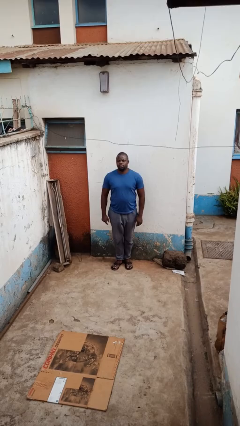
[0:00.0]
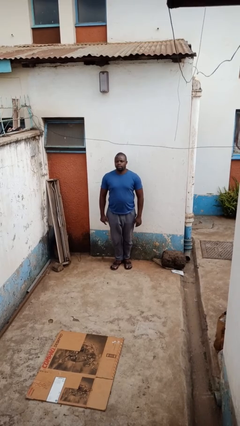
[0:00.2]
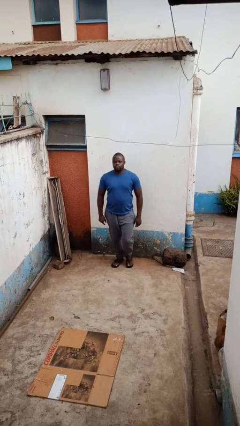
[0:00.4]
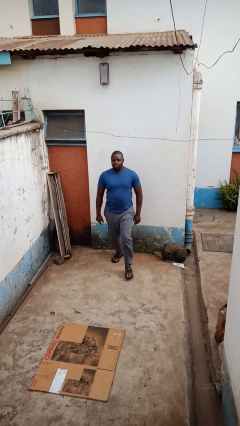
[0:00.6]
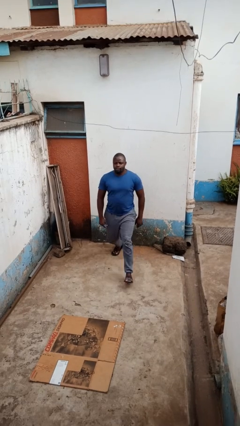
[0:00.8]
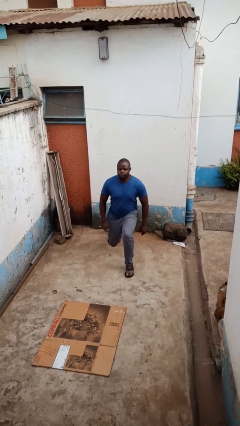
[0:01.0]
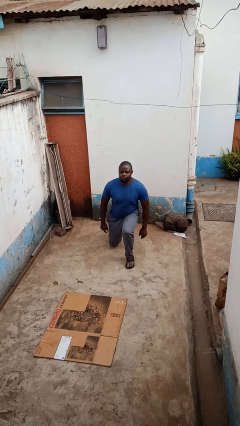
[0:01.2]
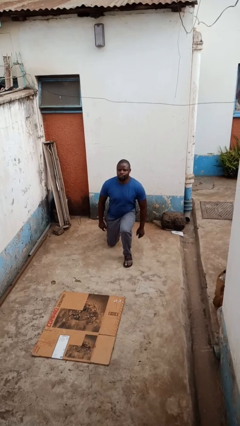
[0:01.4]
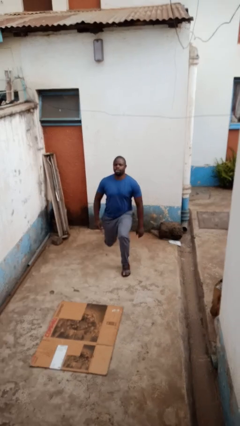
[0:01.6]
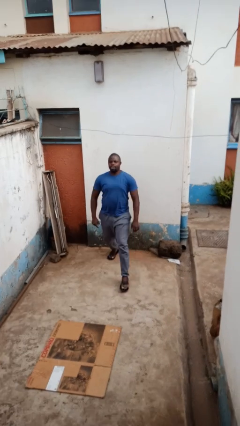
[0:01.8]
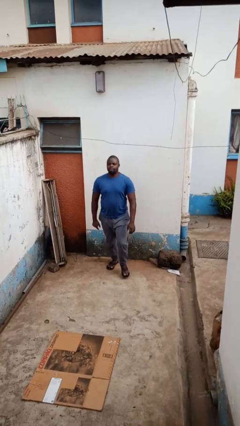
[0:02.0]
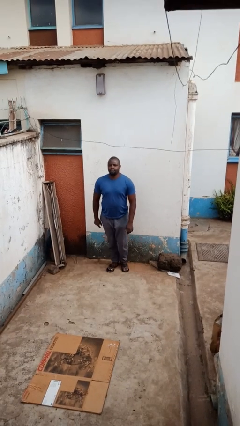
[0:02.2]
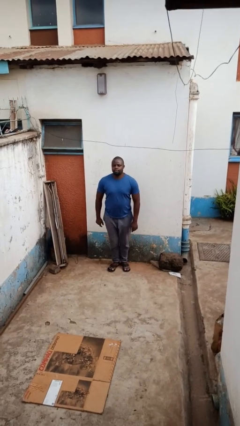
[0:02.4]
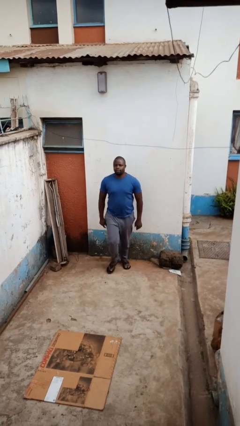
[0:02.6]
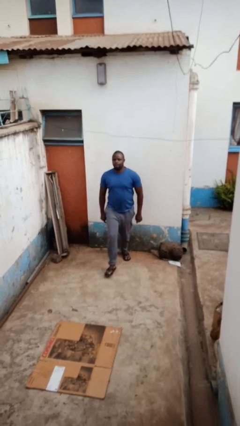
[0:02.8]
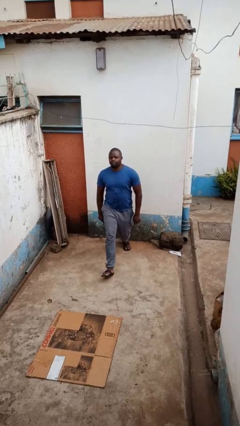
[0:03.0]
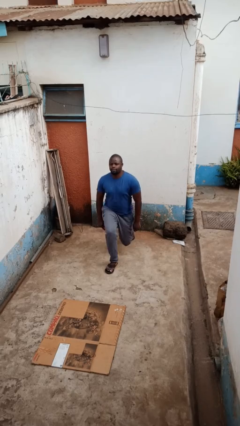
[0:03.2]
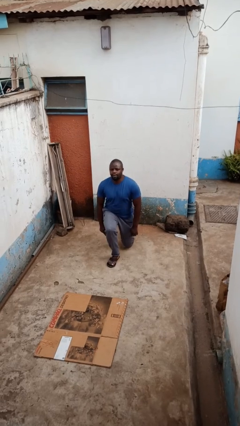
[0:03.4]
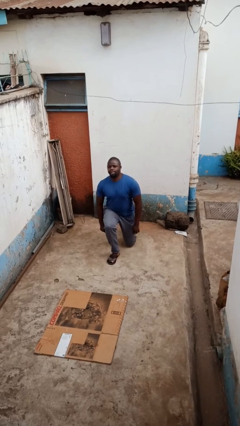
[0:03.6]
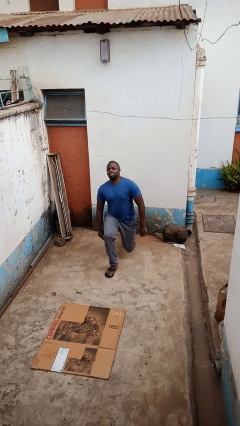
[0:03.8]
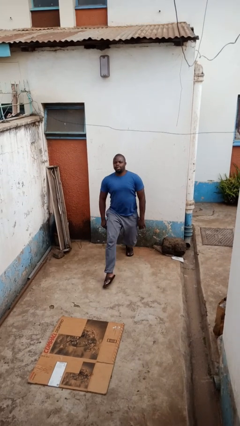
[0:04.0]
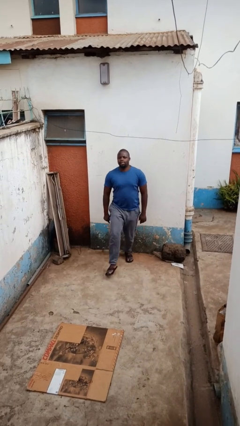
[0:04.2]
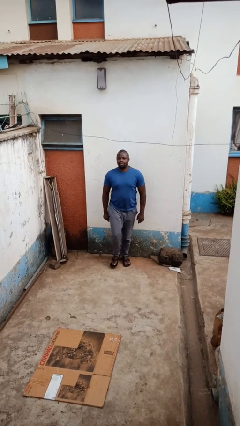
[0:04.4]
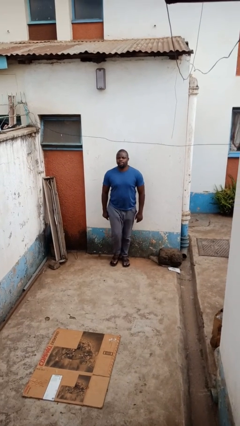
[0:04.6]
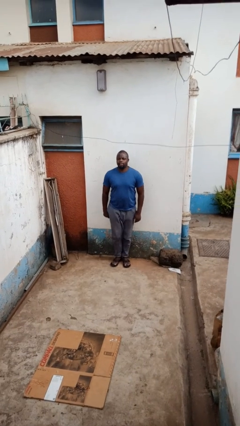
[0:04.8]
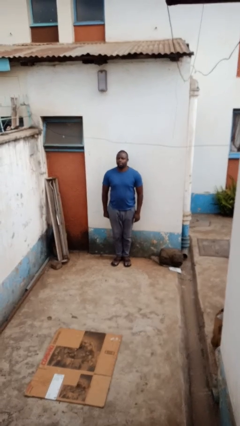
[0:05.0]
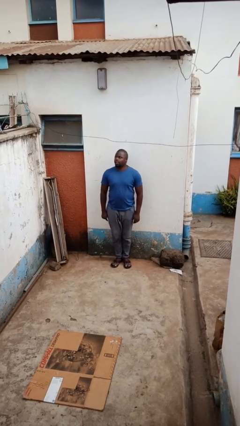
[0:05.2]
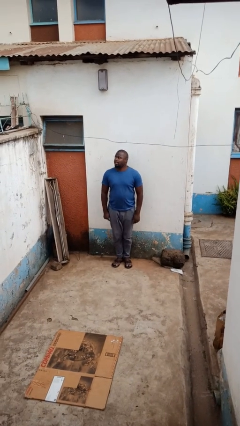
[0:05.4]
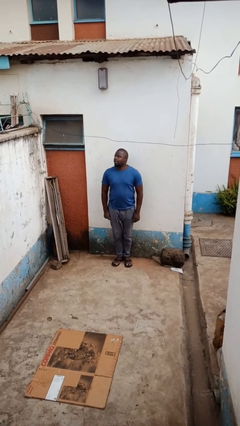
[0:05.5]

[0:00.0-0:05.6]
person exercises with lunges

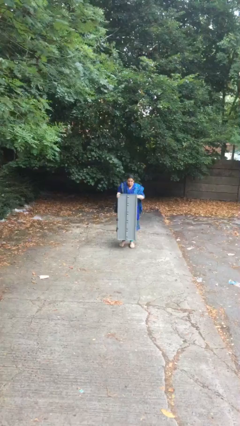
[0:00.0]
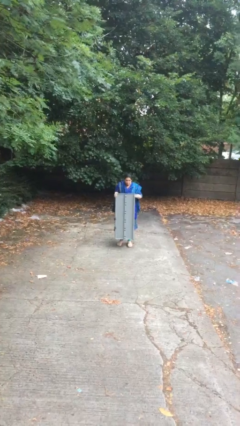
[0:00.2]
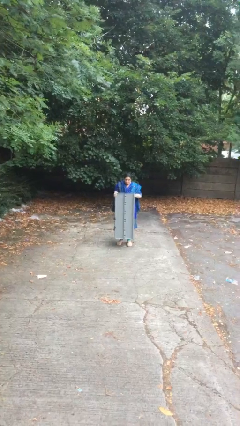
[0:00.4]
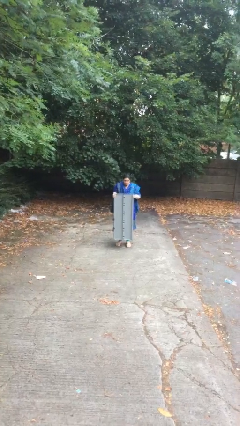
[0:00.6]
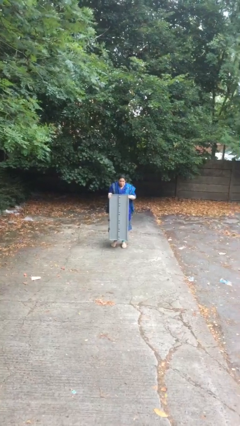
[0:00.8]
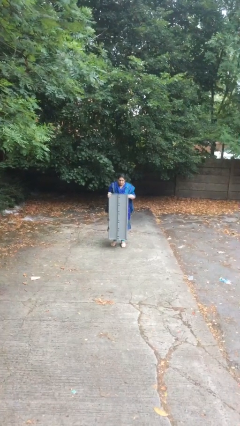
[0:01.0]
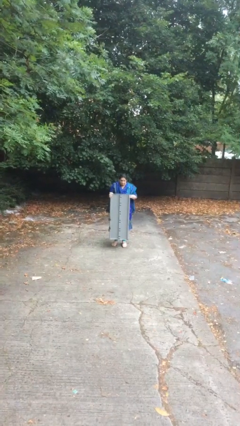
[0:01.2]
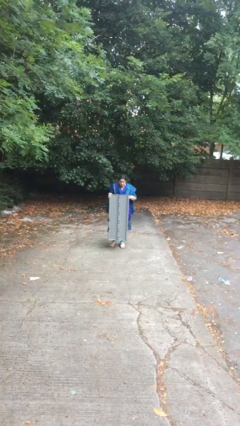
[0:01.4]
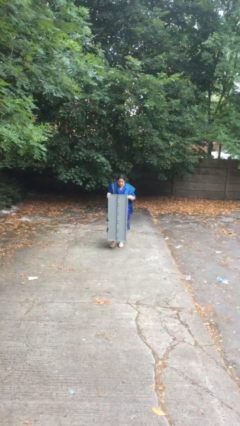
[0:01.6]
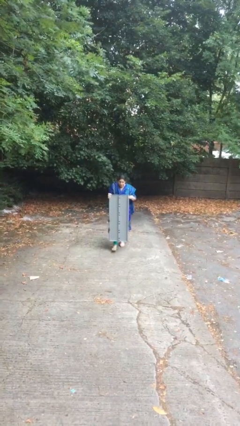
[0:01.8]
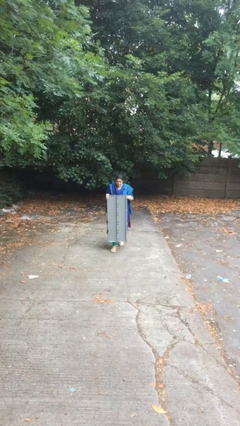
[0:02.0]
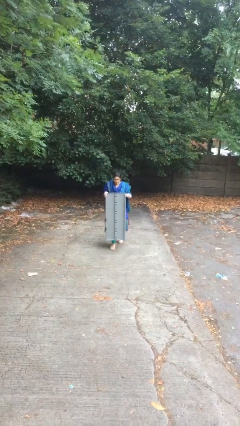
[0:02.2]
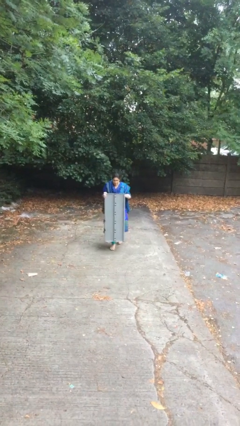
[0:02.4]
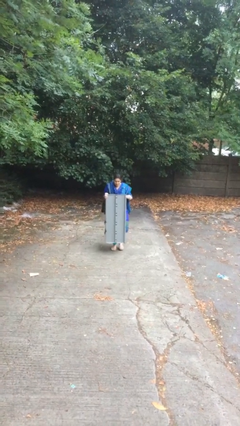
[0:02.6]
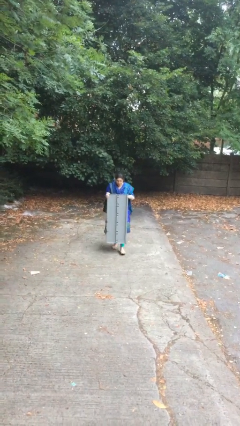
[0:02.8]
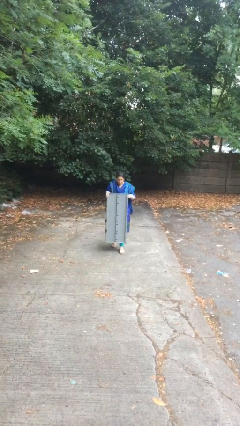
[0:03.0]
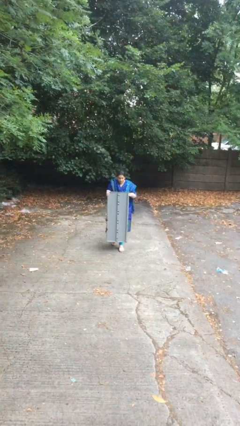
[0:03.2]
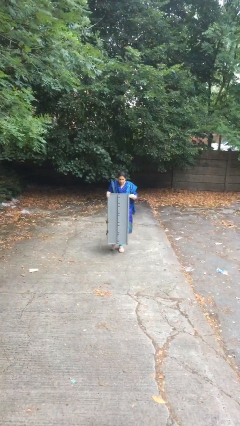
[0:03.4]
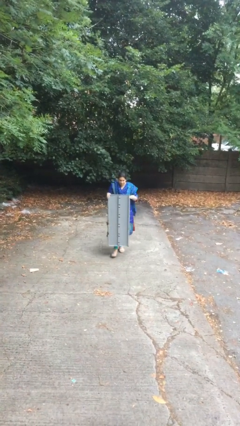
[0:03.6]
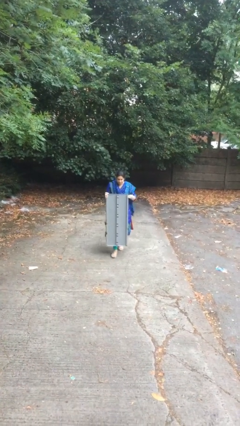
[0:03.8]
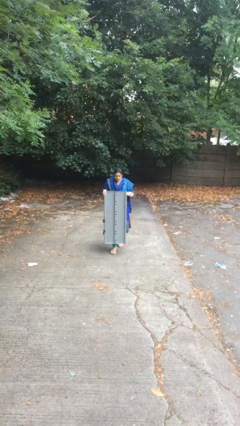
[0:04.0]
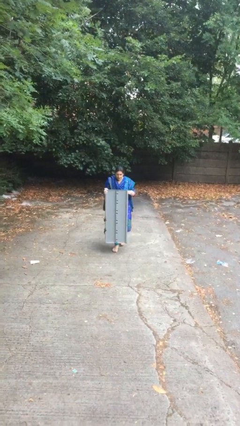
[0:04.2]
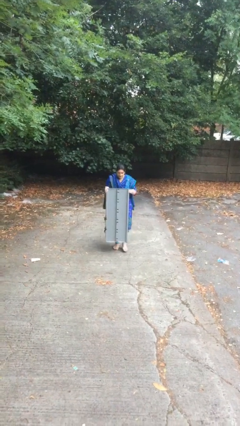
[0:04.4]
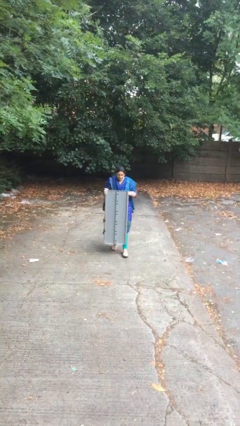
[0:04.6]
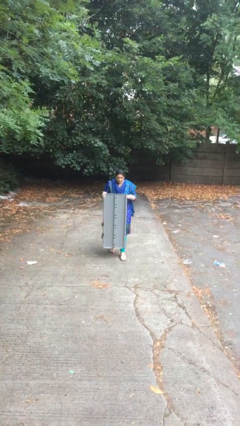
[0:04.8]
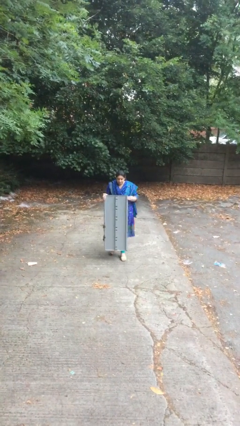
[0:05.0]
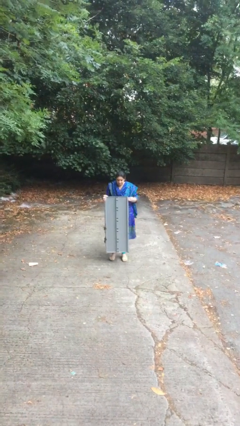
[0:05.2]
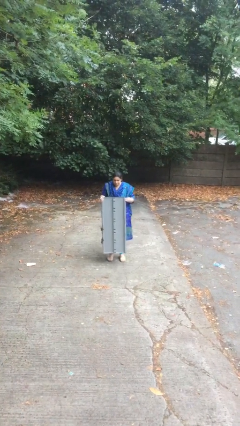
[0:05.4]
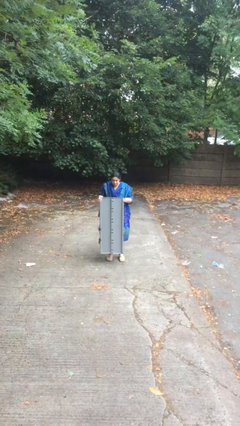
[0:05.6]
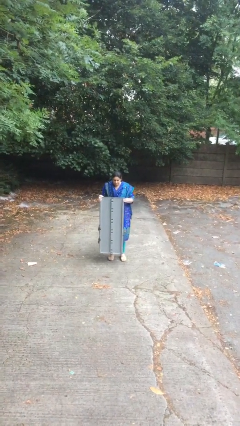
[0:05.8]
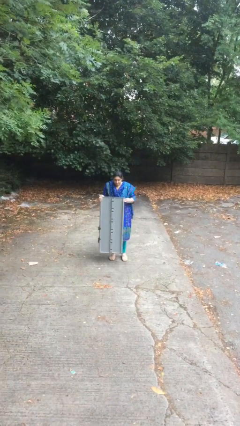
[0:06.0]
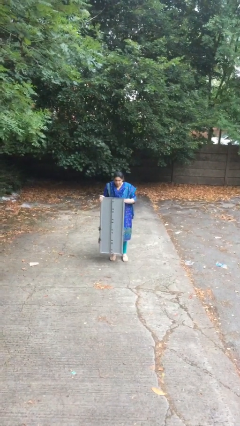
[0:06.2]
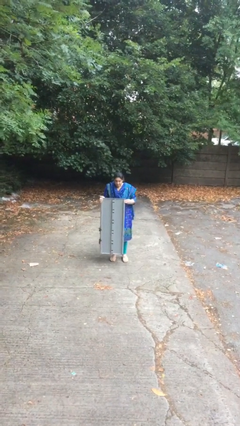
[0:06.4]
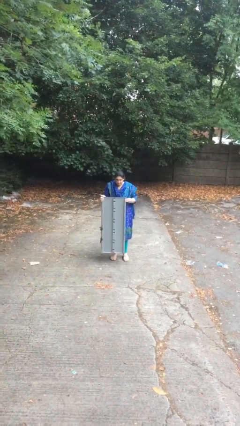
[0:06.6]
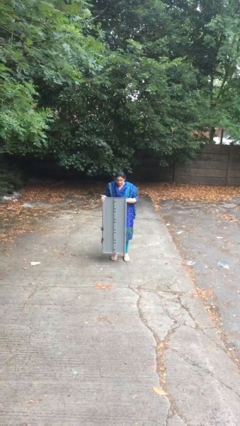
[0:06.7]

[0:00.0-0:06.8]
person carries heavy object

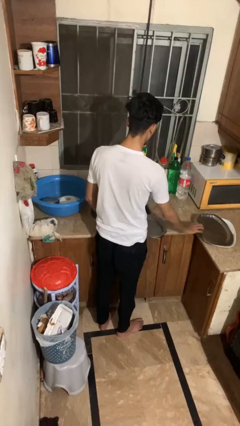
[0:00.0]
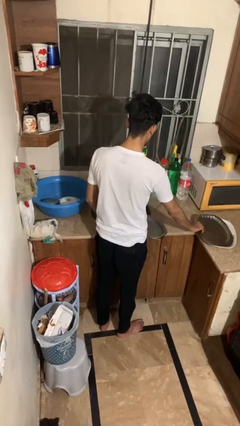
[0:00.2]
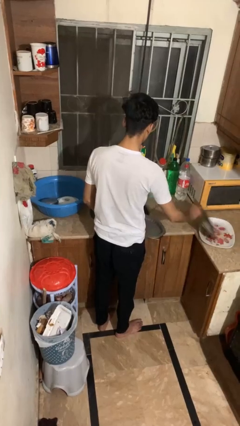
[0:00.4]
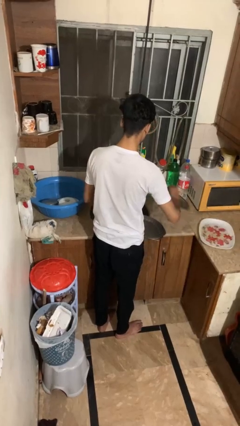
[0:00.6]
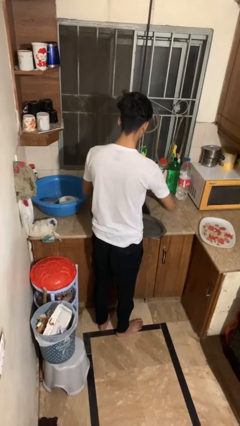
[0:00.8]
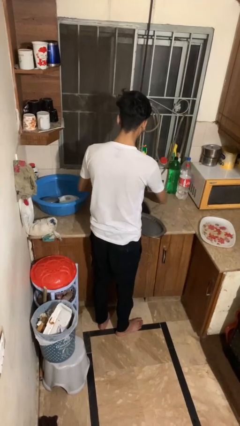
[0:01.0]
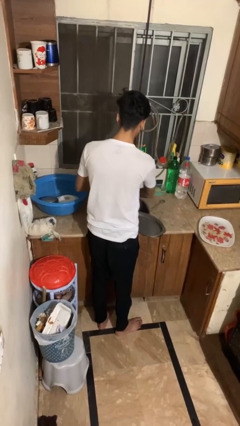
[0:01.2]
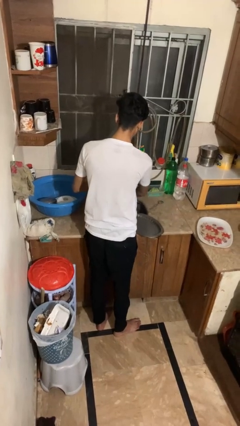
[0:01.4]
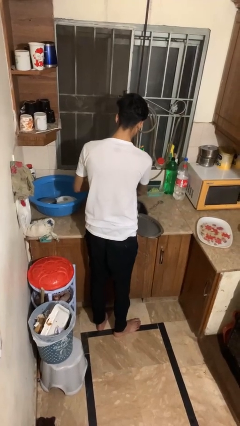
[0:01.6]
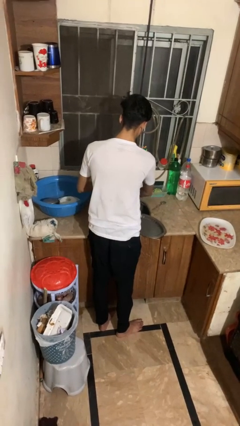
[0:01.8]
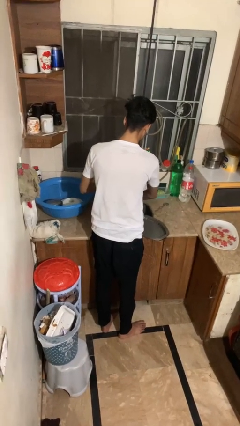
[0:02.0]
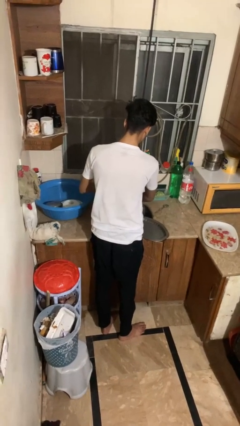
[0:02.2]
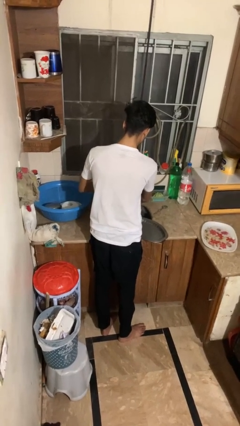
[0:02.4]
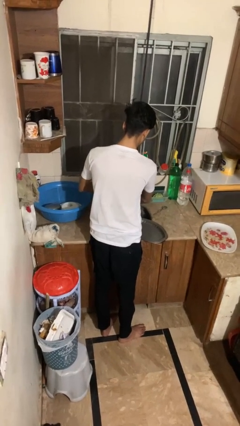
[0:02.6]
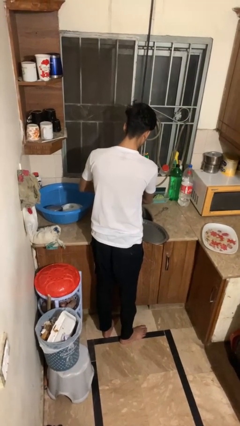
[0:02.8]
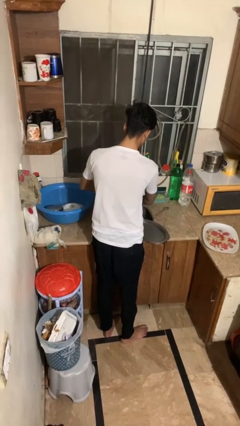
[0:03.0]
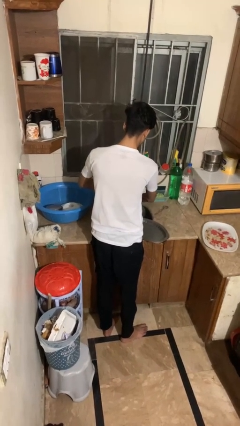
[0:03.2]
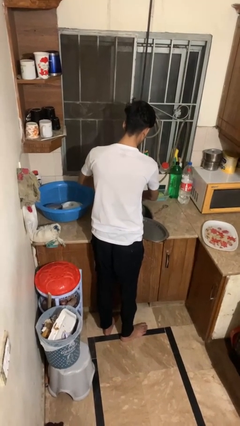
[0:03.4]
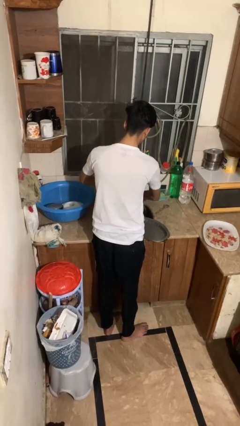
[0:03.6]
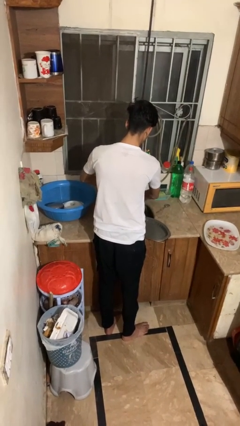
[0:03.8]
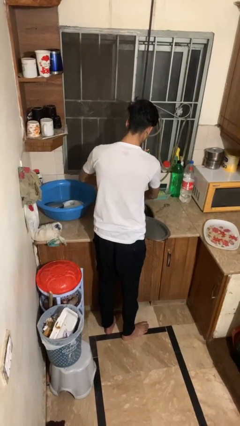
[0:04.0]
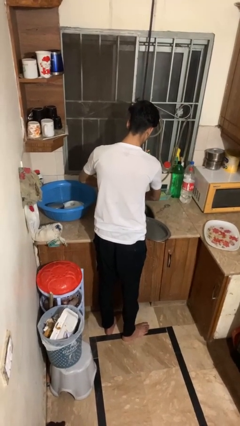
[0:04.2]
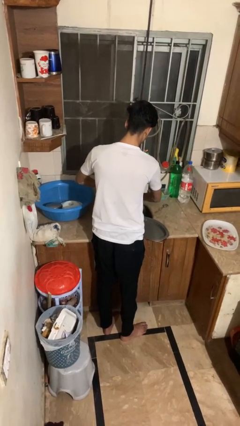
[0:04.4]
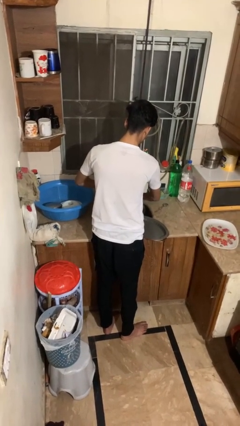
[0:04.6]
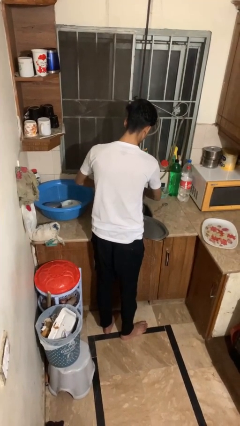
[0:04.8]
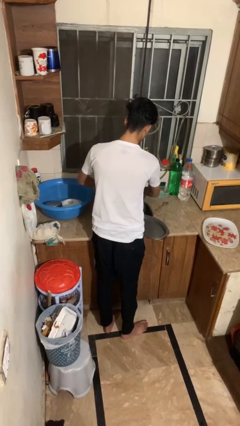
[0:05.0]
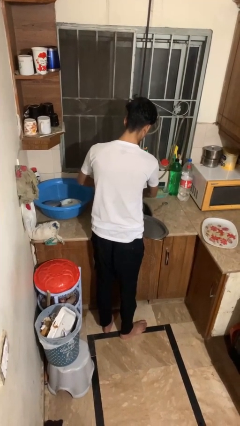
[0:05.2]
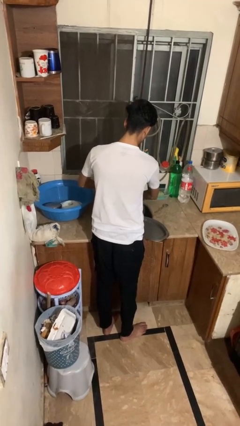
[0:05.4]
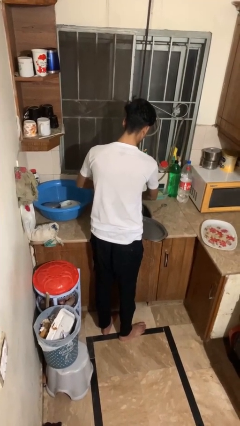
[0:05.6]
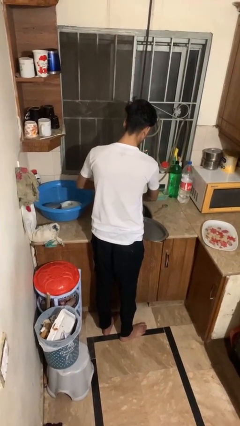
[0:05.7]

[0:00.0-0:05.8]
person washes dish

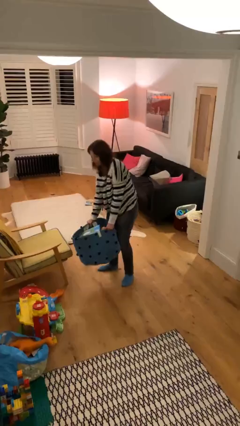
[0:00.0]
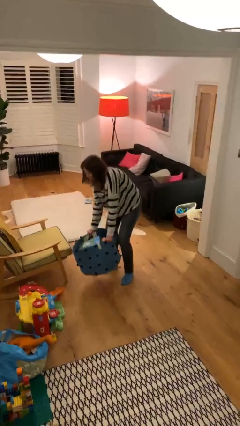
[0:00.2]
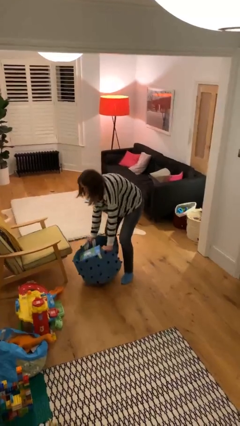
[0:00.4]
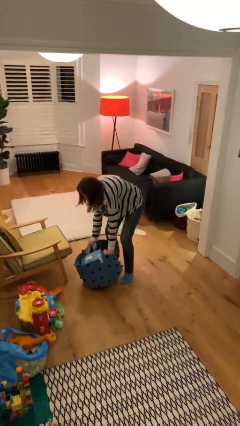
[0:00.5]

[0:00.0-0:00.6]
person puts down object on floor
